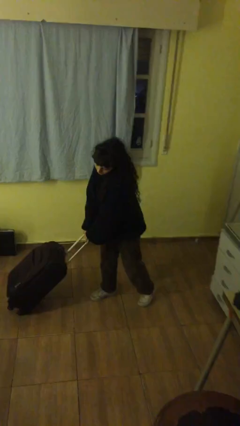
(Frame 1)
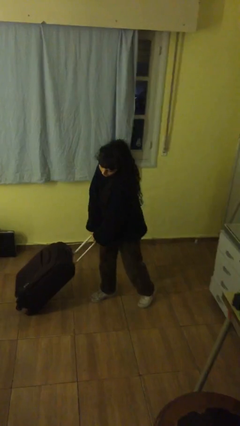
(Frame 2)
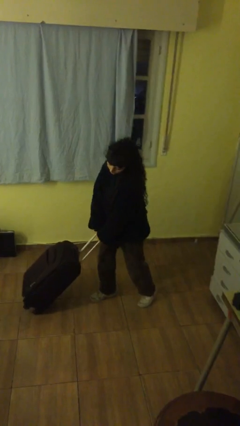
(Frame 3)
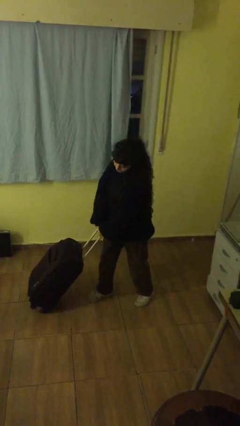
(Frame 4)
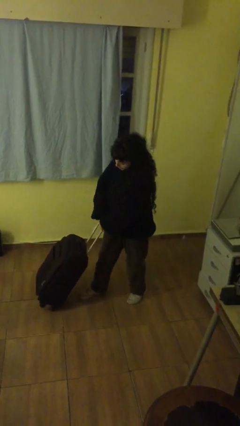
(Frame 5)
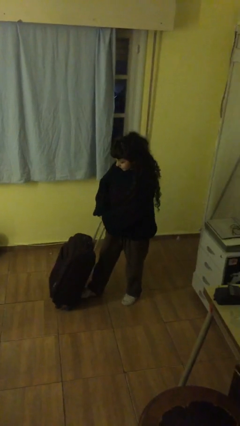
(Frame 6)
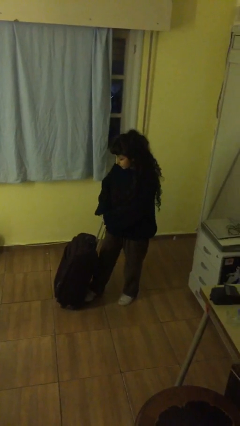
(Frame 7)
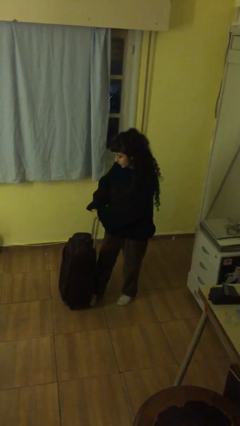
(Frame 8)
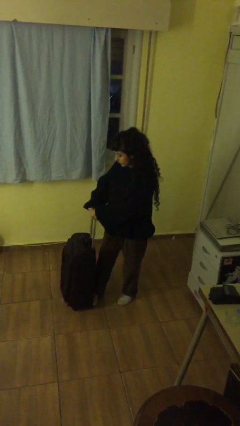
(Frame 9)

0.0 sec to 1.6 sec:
person pulls wheeled cart

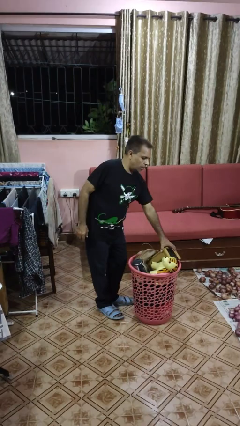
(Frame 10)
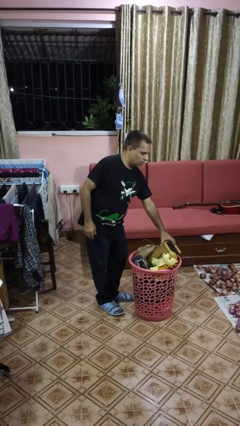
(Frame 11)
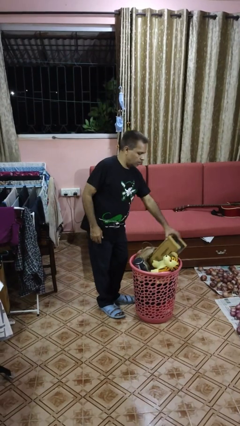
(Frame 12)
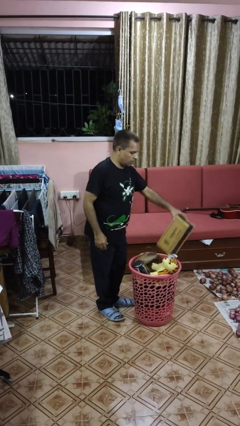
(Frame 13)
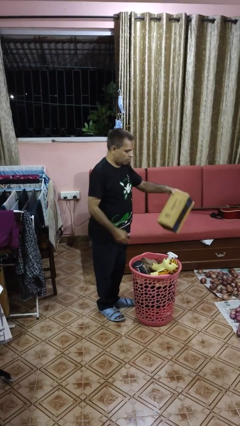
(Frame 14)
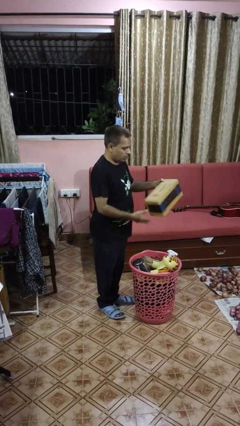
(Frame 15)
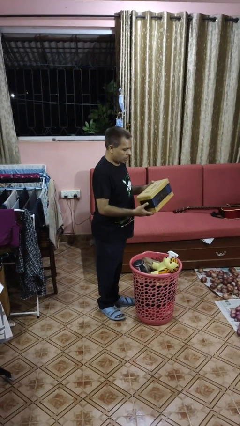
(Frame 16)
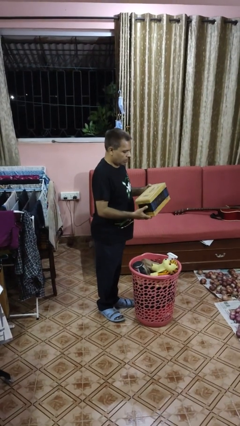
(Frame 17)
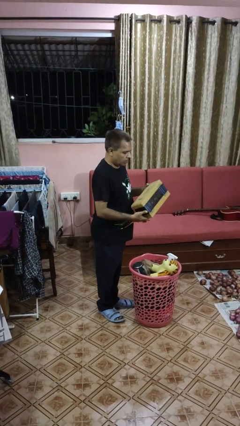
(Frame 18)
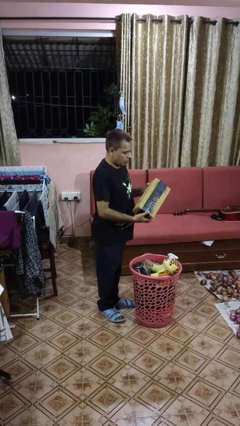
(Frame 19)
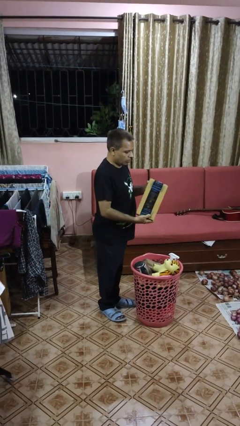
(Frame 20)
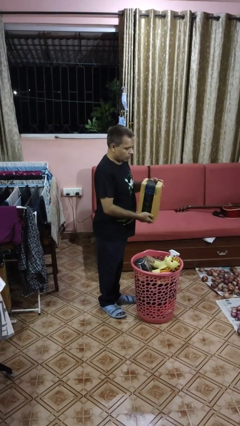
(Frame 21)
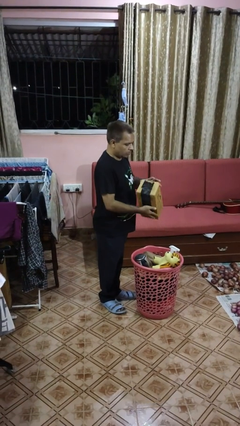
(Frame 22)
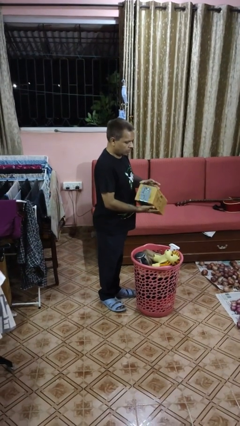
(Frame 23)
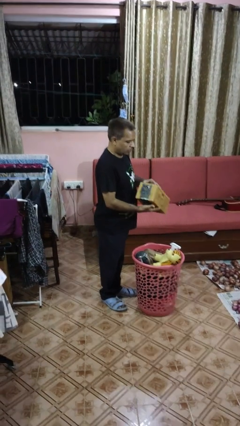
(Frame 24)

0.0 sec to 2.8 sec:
person takes object from basket

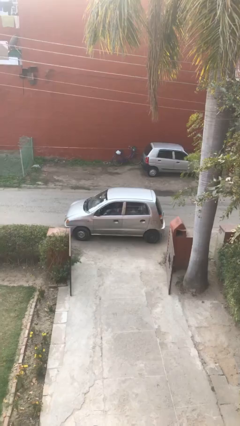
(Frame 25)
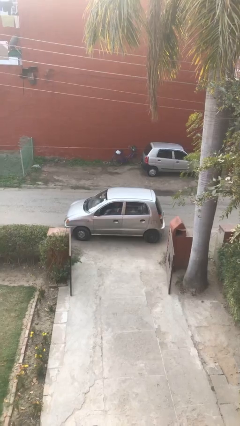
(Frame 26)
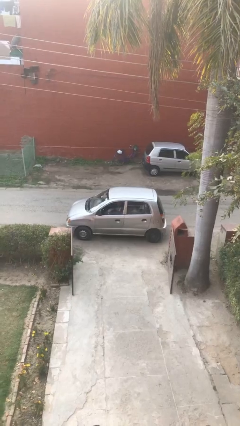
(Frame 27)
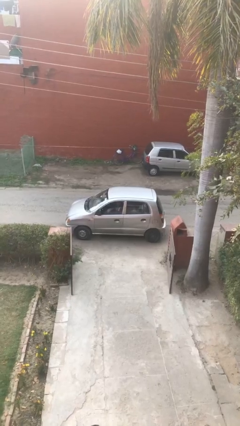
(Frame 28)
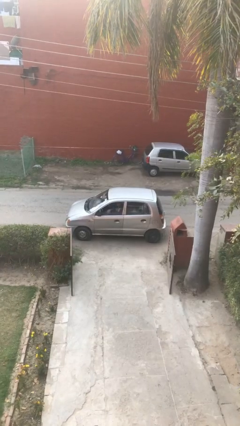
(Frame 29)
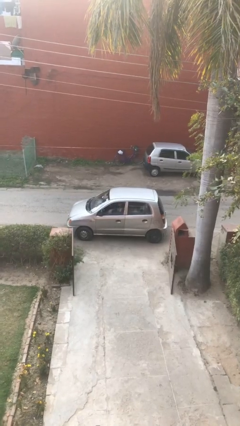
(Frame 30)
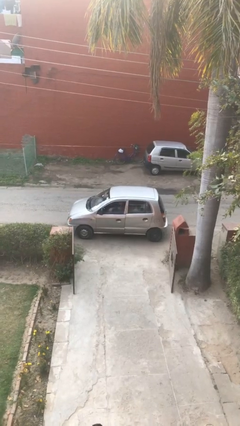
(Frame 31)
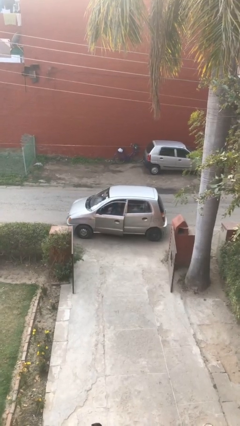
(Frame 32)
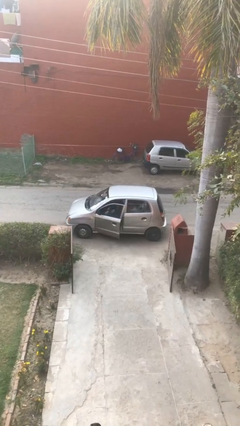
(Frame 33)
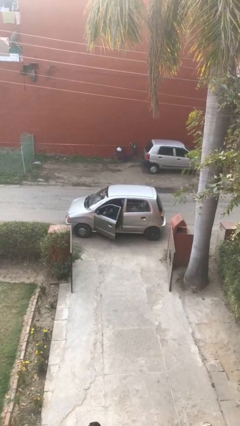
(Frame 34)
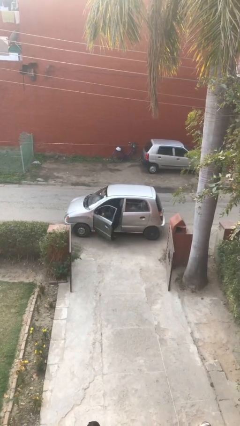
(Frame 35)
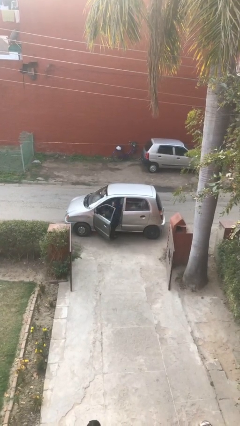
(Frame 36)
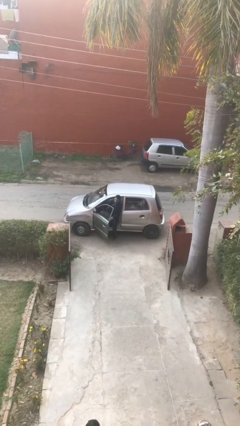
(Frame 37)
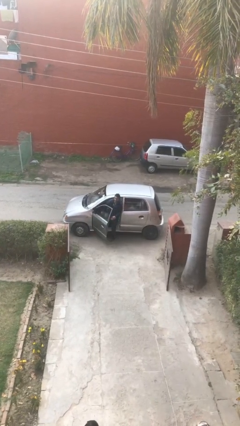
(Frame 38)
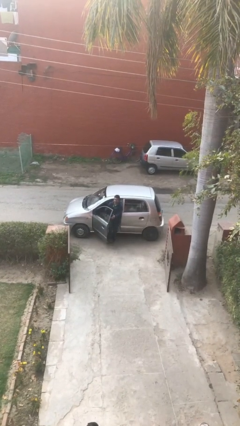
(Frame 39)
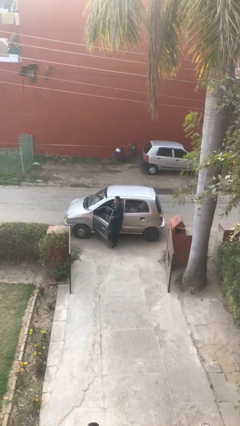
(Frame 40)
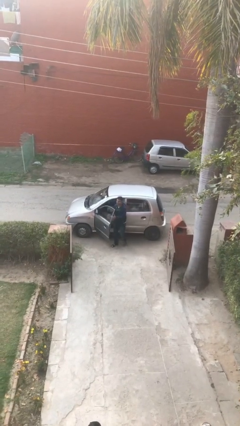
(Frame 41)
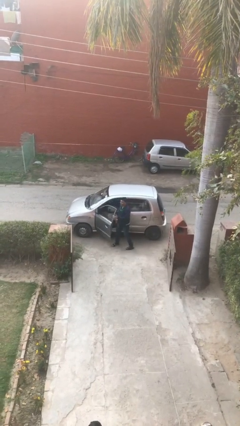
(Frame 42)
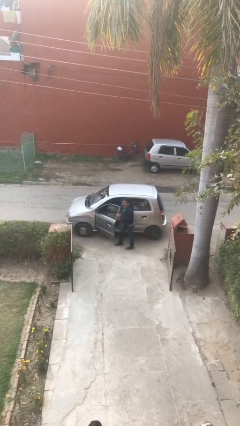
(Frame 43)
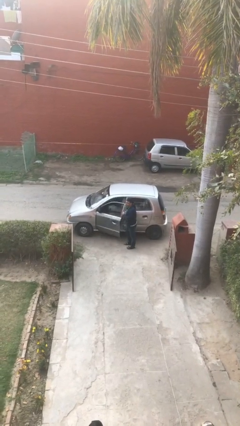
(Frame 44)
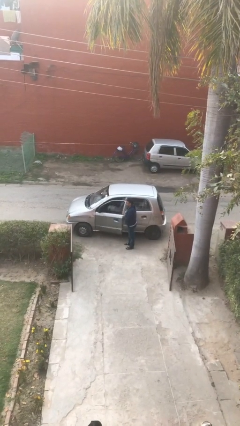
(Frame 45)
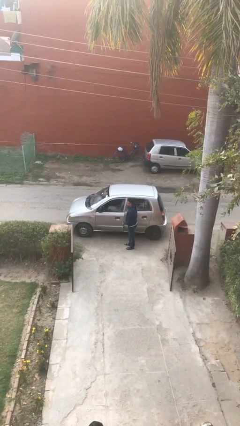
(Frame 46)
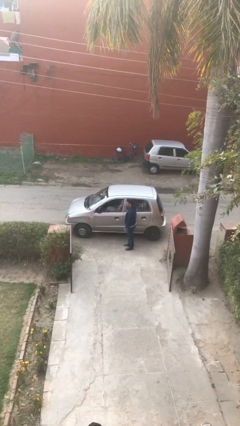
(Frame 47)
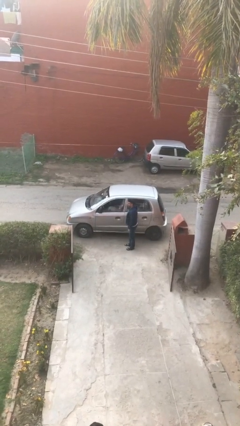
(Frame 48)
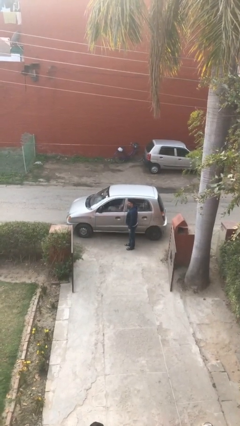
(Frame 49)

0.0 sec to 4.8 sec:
car drops off person

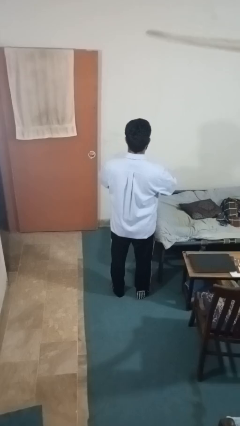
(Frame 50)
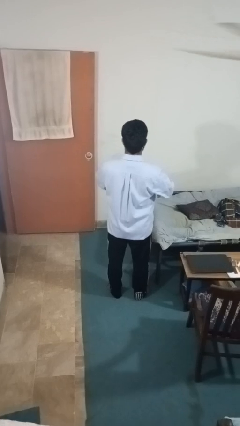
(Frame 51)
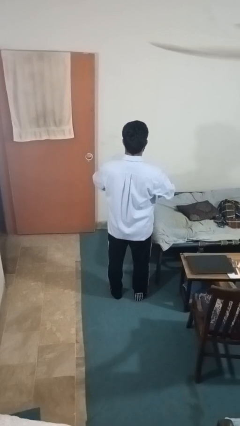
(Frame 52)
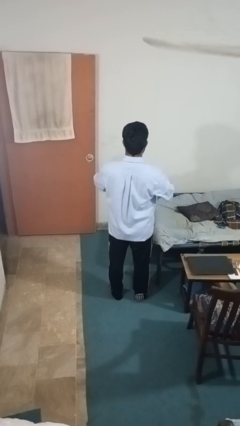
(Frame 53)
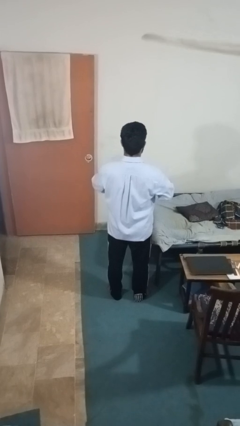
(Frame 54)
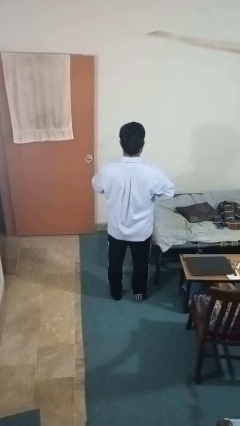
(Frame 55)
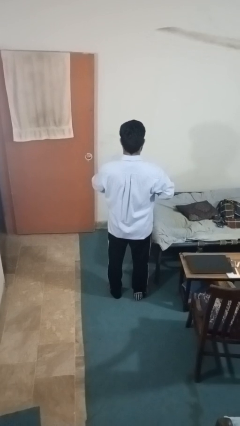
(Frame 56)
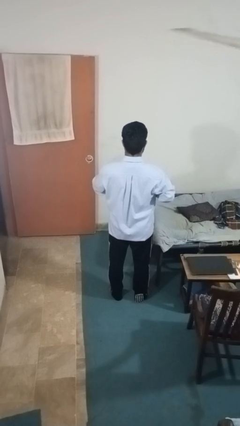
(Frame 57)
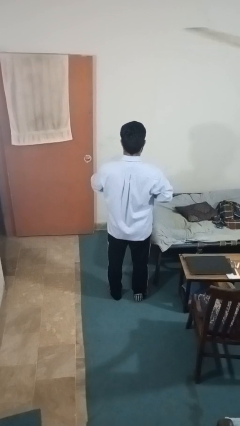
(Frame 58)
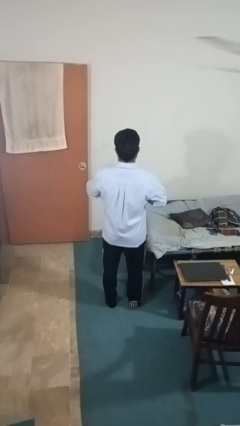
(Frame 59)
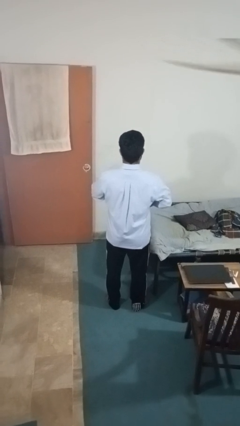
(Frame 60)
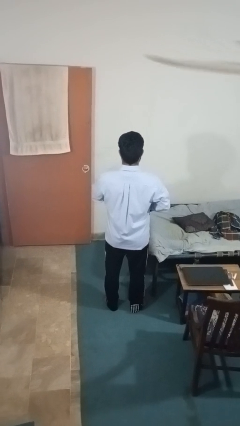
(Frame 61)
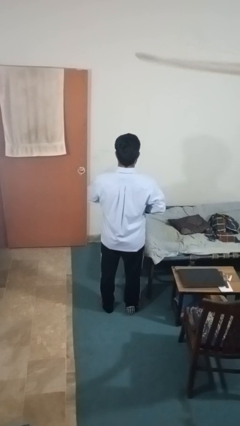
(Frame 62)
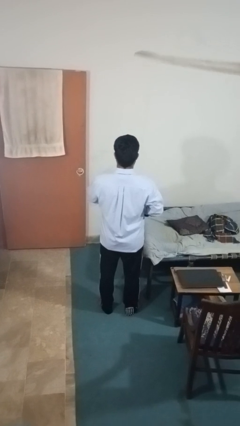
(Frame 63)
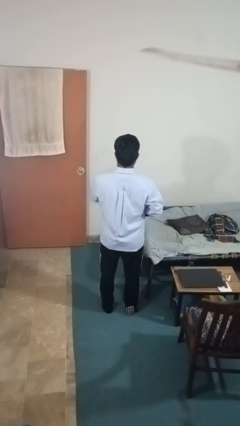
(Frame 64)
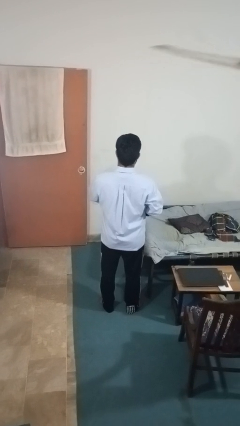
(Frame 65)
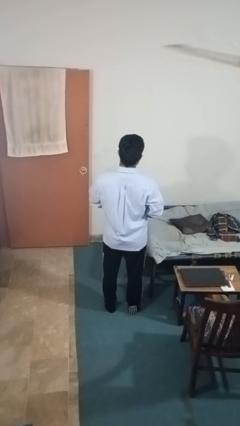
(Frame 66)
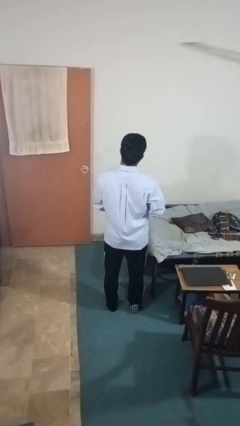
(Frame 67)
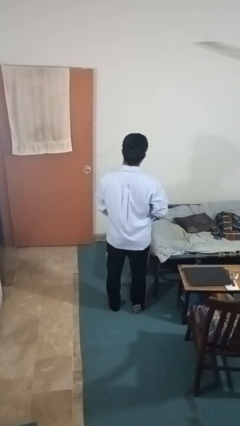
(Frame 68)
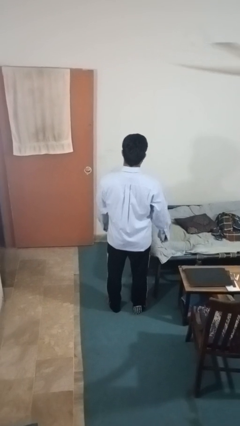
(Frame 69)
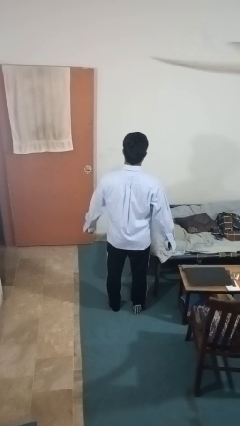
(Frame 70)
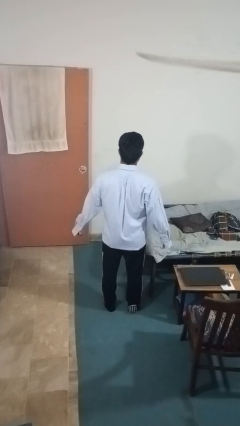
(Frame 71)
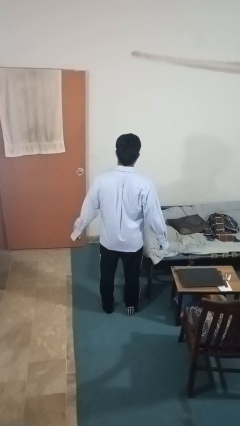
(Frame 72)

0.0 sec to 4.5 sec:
person buttons shirt

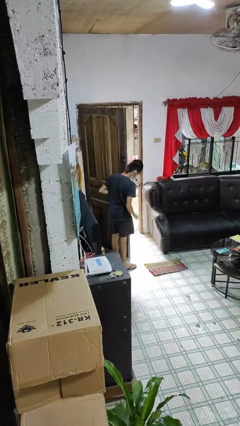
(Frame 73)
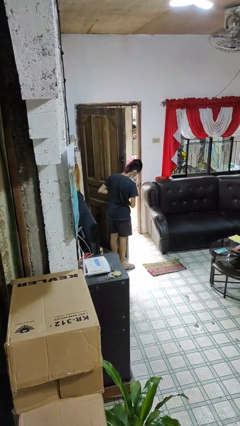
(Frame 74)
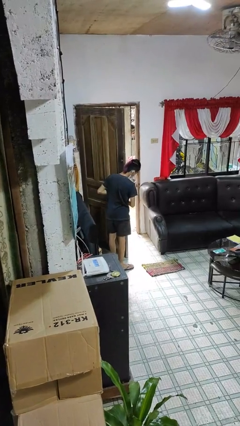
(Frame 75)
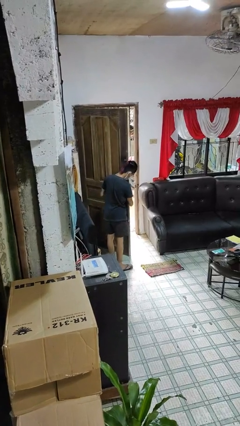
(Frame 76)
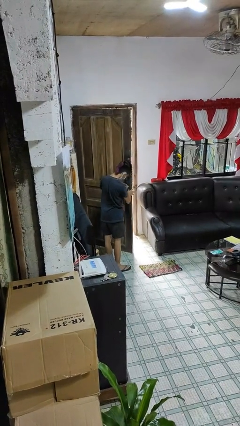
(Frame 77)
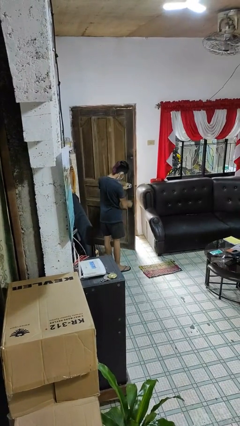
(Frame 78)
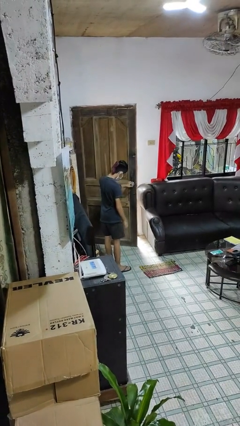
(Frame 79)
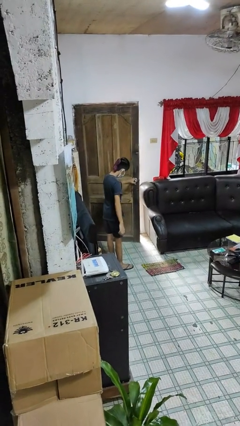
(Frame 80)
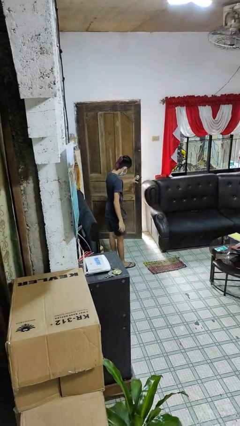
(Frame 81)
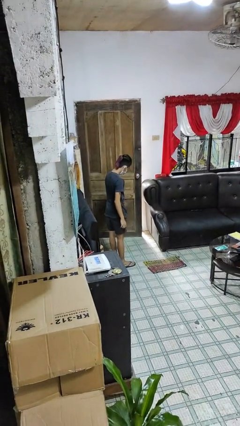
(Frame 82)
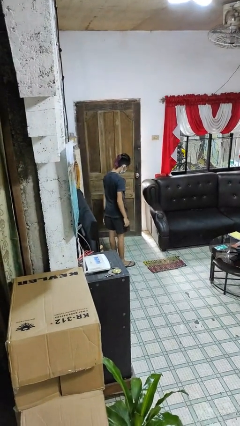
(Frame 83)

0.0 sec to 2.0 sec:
person closes facility door

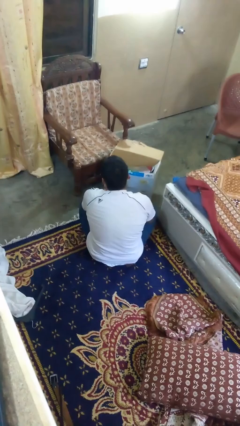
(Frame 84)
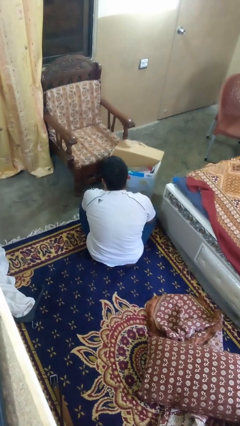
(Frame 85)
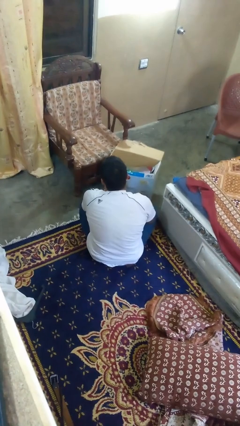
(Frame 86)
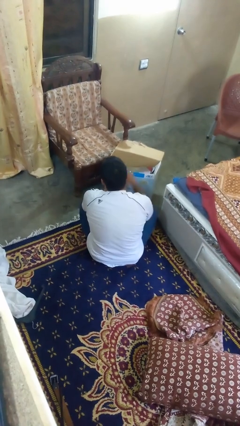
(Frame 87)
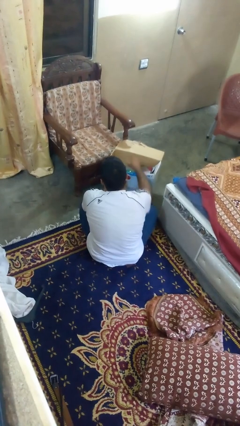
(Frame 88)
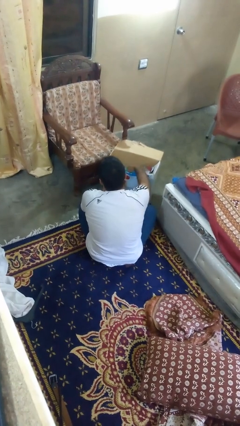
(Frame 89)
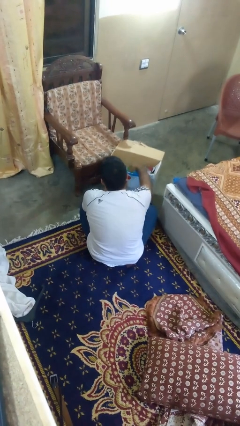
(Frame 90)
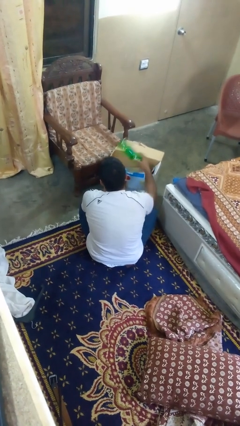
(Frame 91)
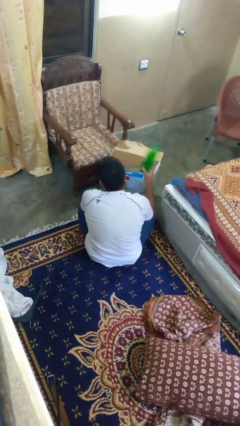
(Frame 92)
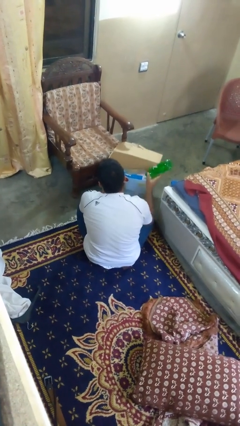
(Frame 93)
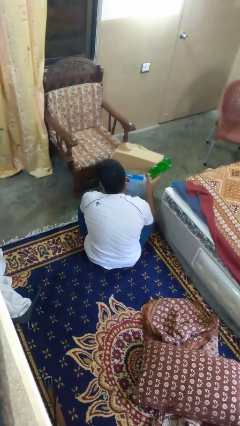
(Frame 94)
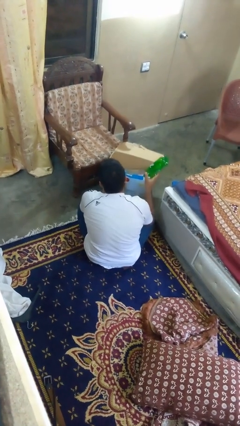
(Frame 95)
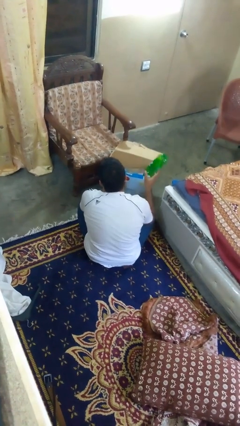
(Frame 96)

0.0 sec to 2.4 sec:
person takes object from box
